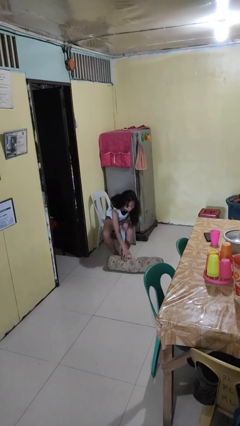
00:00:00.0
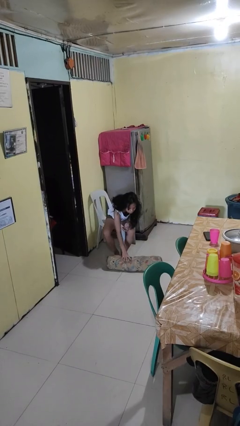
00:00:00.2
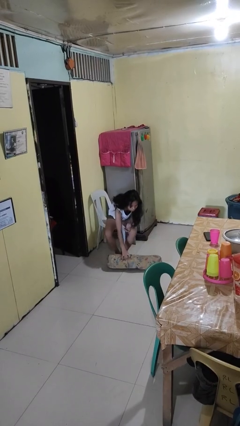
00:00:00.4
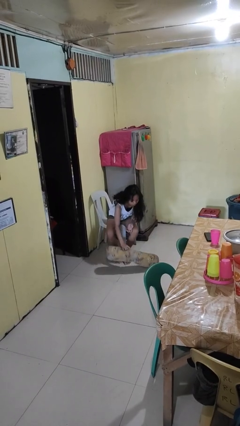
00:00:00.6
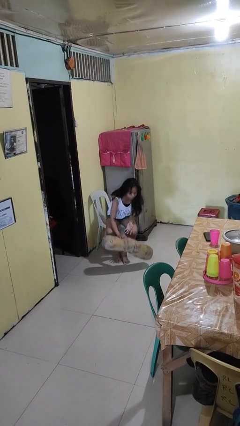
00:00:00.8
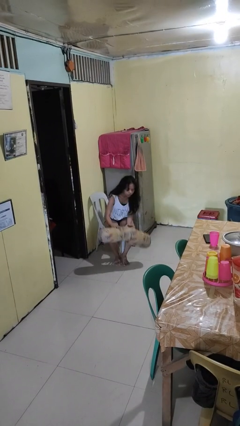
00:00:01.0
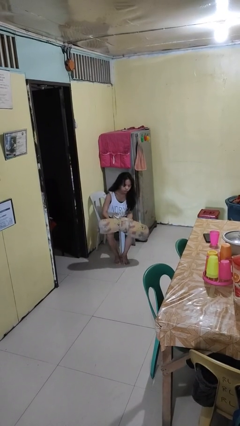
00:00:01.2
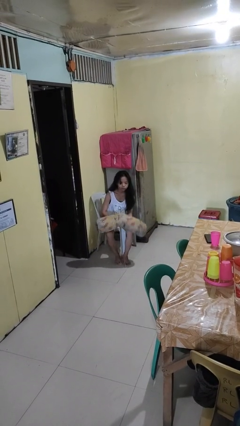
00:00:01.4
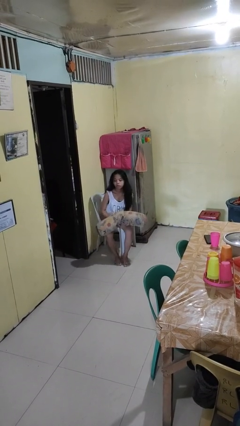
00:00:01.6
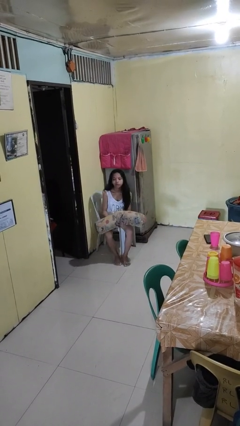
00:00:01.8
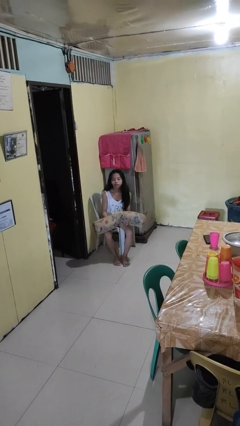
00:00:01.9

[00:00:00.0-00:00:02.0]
person picks up object from floor

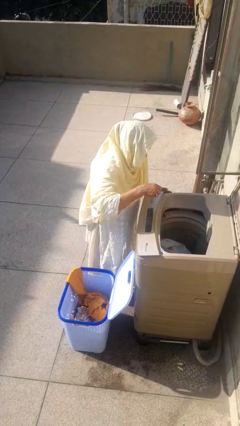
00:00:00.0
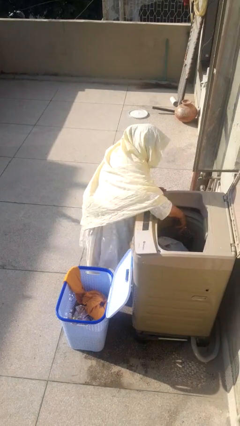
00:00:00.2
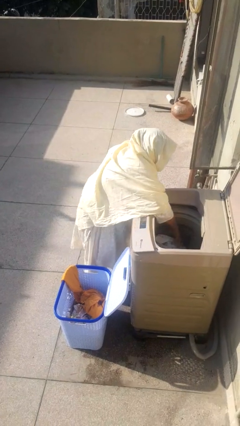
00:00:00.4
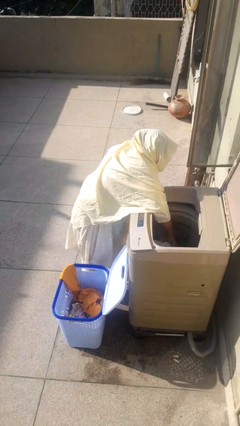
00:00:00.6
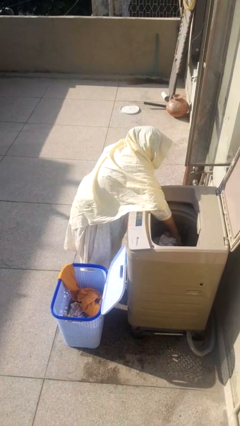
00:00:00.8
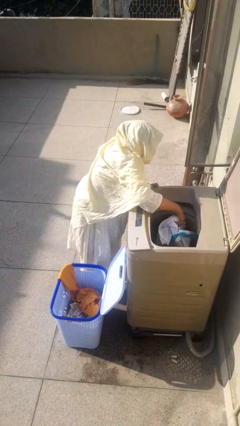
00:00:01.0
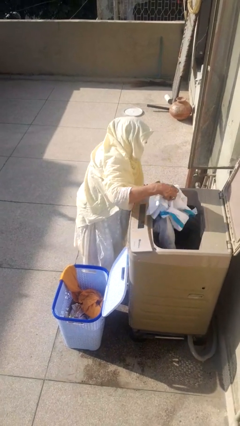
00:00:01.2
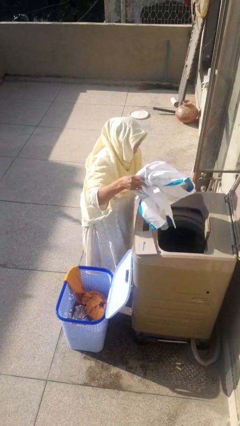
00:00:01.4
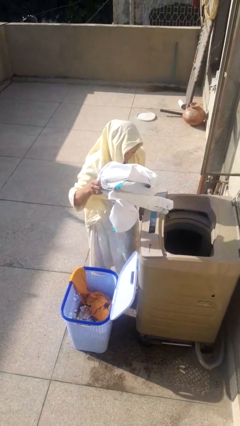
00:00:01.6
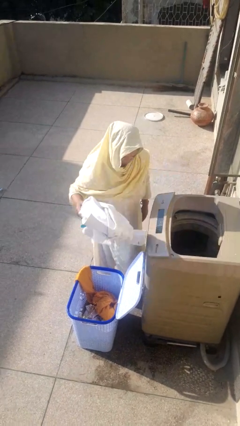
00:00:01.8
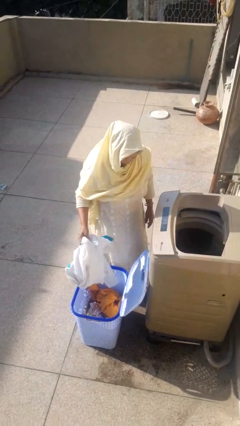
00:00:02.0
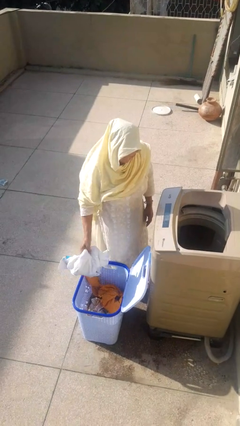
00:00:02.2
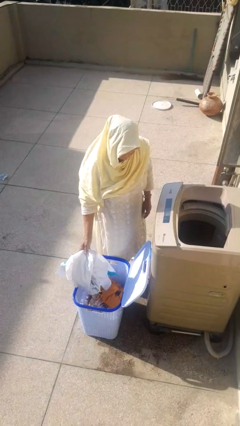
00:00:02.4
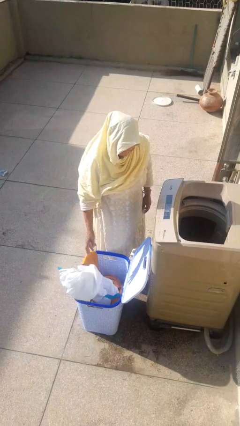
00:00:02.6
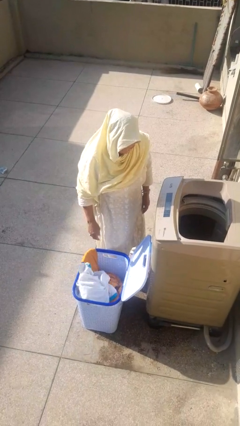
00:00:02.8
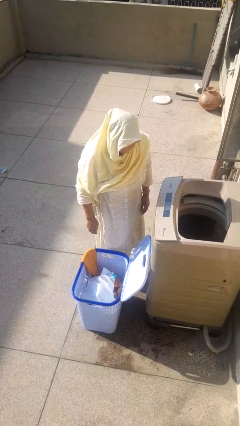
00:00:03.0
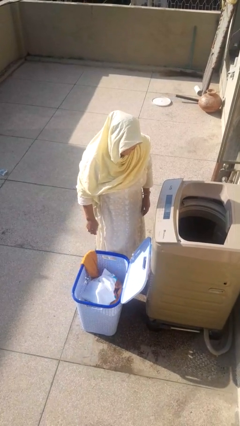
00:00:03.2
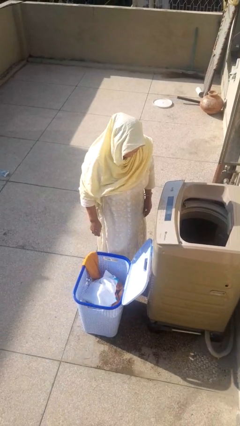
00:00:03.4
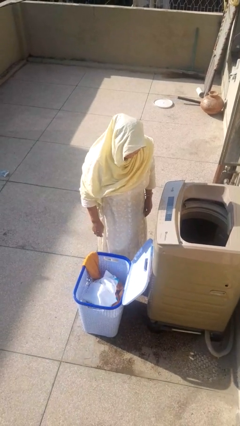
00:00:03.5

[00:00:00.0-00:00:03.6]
person unloads clotheswasher

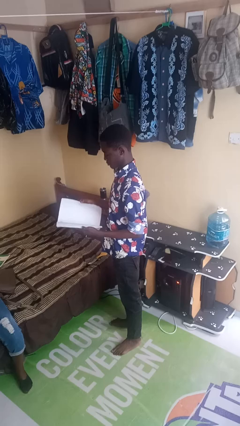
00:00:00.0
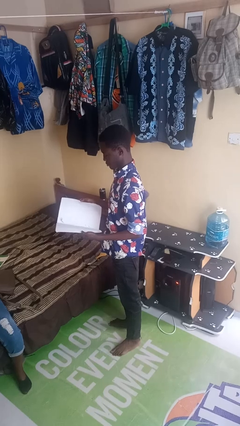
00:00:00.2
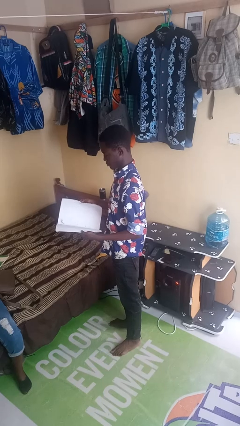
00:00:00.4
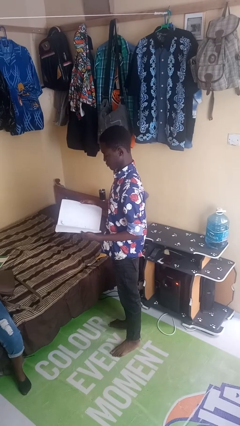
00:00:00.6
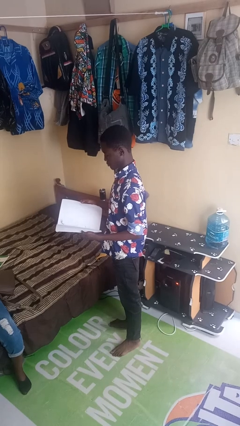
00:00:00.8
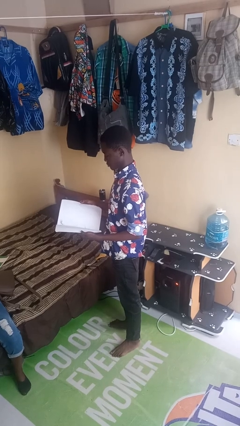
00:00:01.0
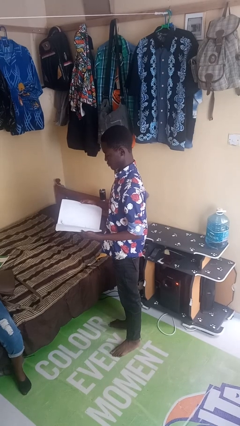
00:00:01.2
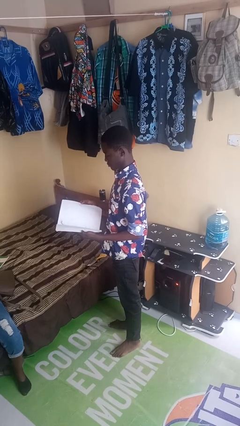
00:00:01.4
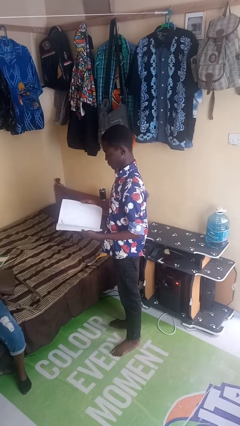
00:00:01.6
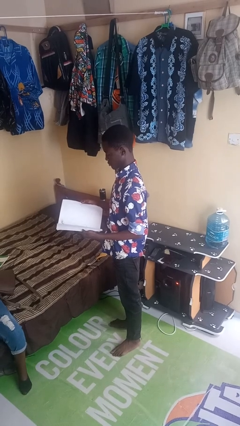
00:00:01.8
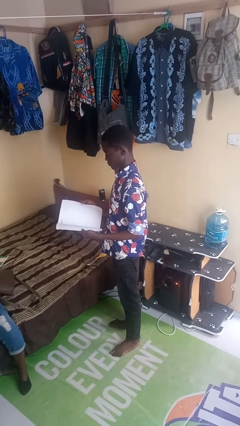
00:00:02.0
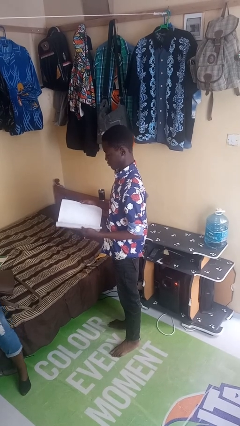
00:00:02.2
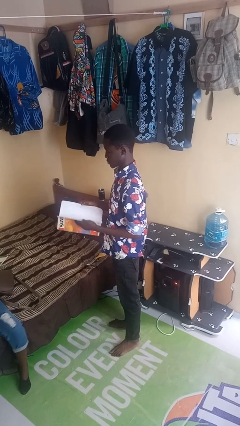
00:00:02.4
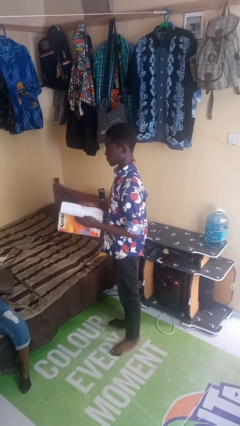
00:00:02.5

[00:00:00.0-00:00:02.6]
person reads book

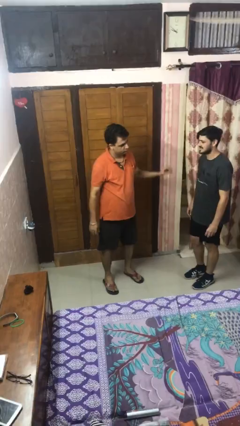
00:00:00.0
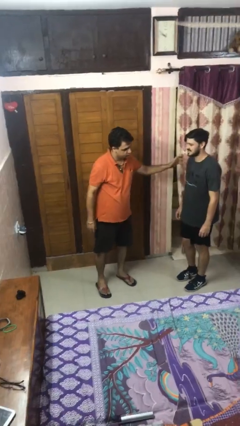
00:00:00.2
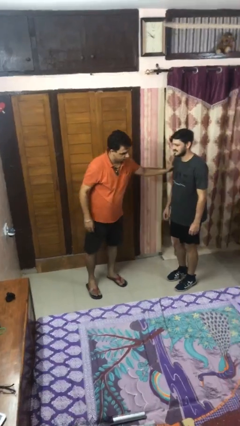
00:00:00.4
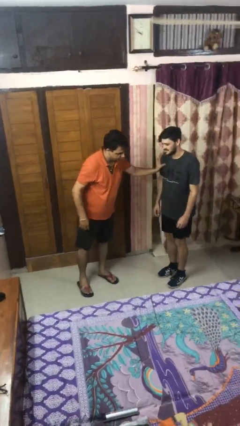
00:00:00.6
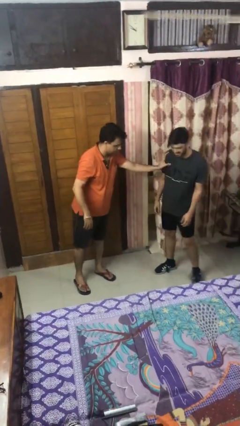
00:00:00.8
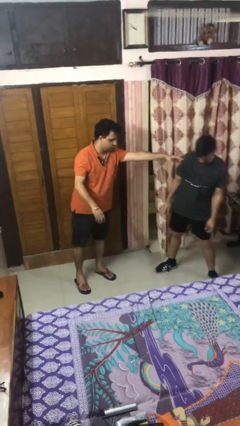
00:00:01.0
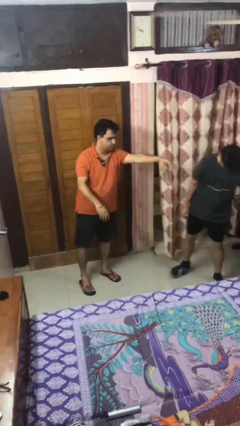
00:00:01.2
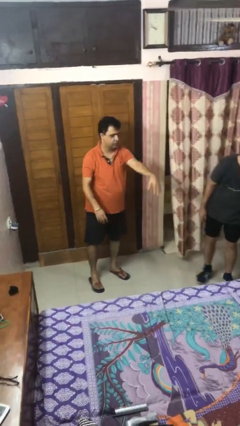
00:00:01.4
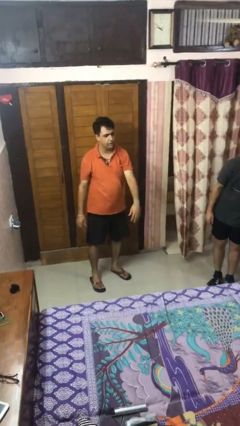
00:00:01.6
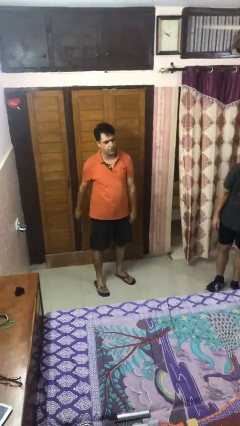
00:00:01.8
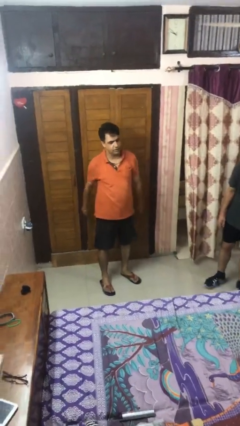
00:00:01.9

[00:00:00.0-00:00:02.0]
person shoves person

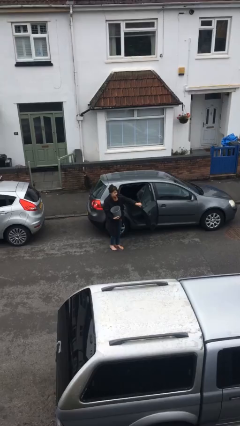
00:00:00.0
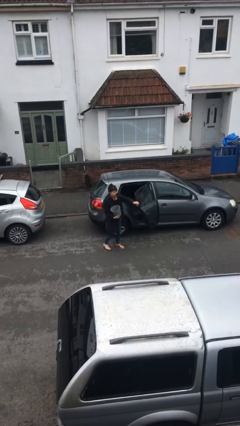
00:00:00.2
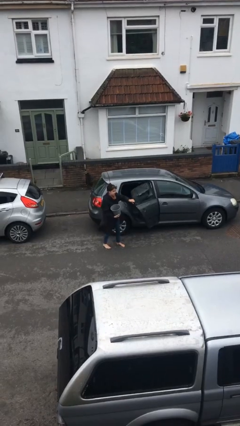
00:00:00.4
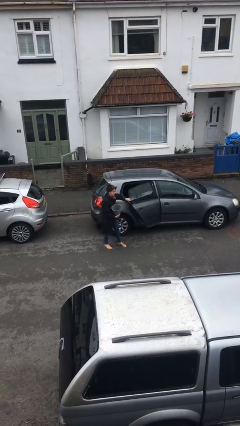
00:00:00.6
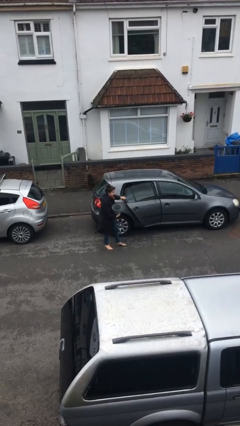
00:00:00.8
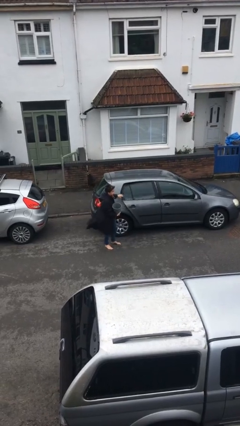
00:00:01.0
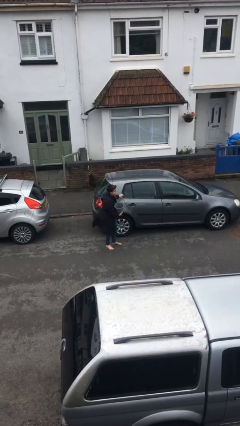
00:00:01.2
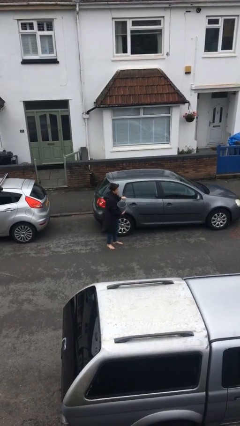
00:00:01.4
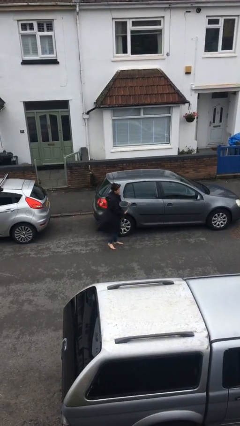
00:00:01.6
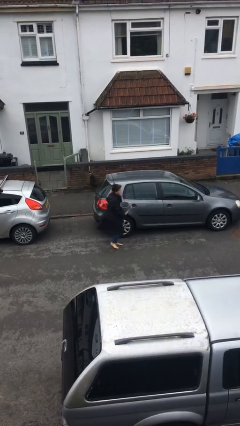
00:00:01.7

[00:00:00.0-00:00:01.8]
person closes car door

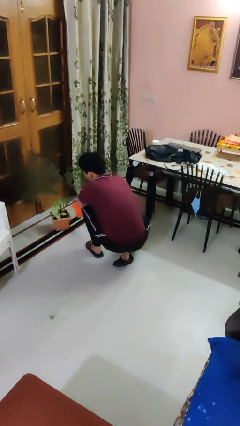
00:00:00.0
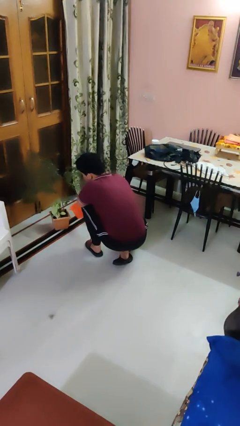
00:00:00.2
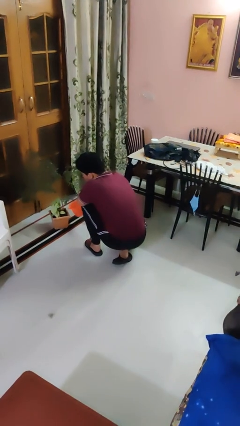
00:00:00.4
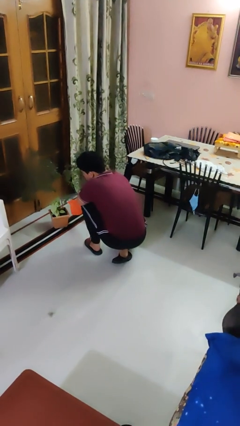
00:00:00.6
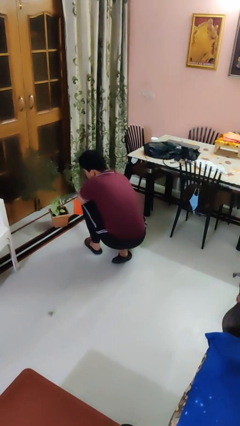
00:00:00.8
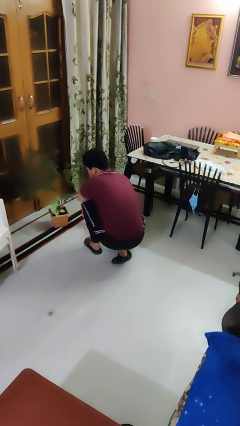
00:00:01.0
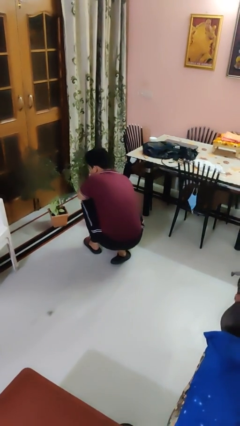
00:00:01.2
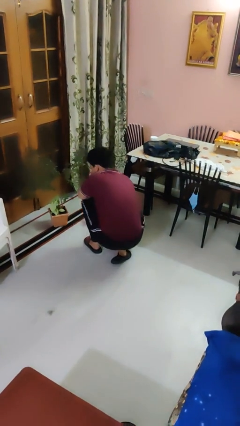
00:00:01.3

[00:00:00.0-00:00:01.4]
person waters houseplant

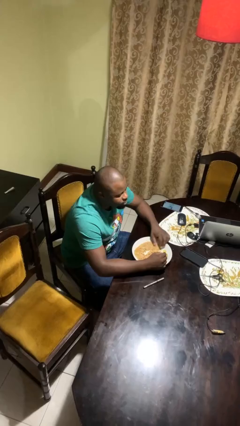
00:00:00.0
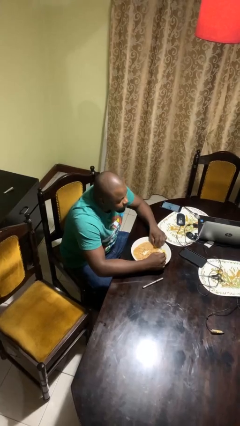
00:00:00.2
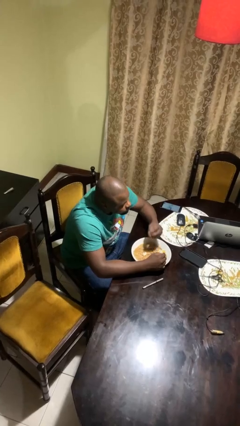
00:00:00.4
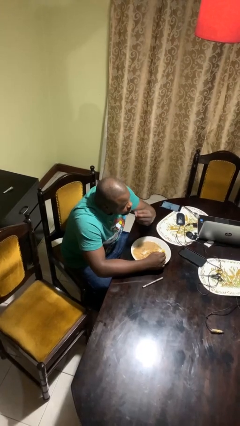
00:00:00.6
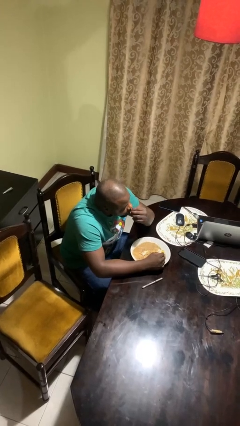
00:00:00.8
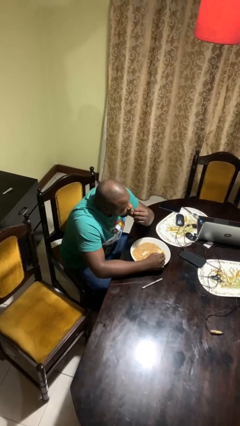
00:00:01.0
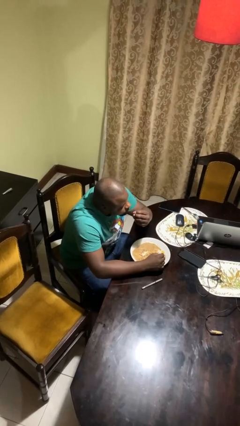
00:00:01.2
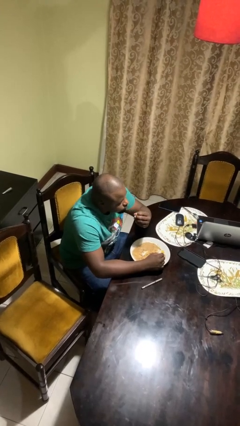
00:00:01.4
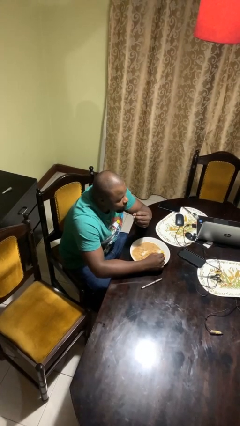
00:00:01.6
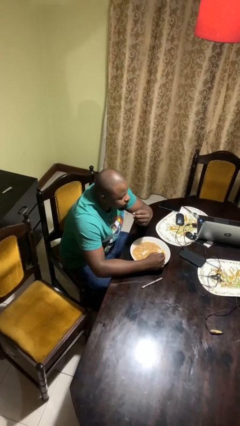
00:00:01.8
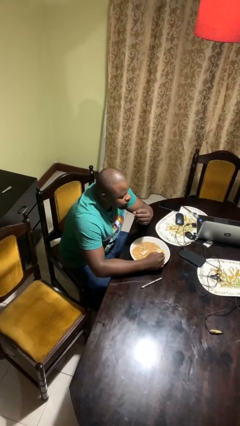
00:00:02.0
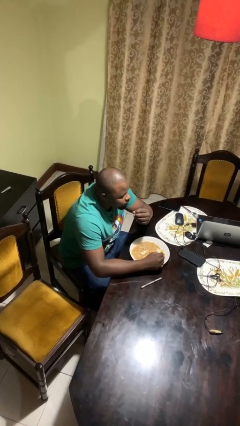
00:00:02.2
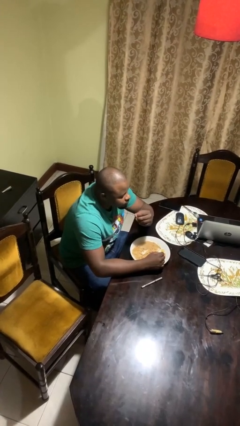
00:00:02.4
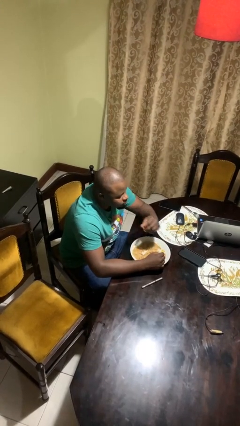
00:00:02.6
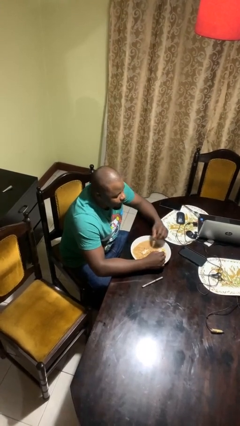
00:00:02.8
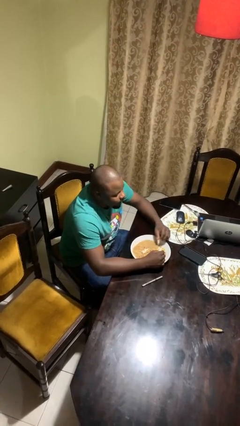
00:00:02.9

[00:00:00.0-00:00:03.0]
person eats with hands

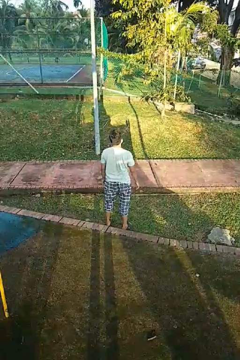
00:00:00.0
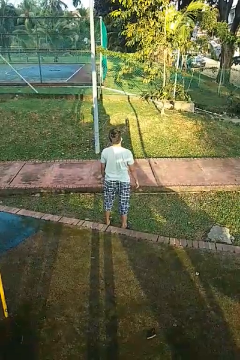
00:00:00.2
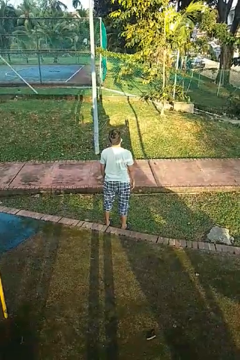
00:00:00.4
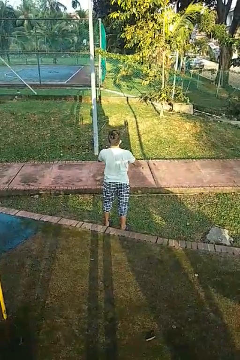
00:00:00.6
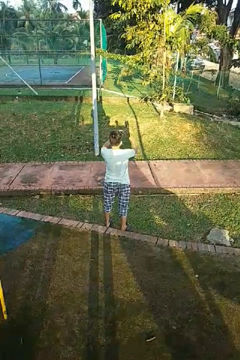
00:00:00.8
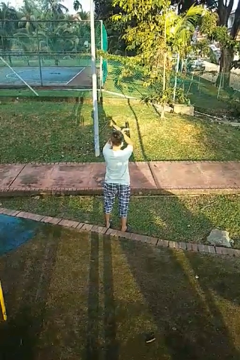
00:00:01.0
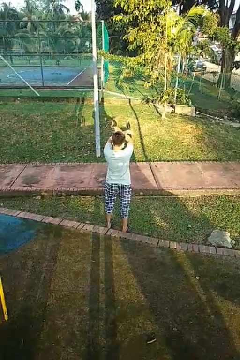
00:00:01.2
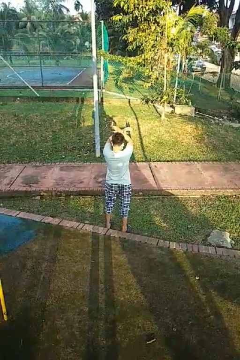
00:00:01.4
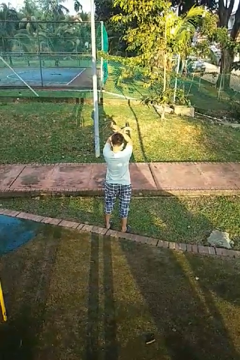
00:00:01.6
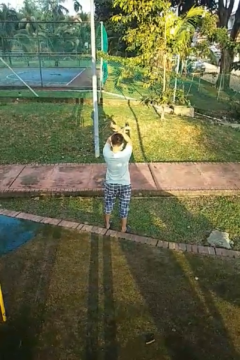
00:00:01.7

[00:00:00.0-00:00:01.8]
person gestures arms x
